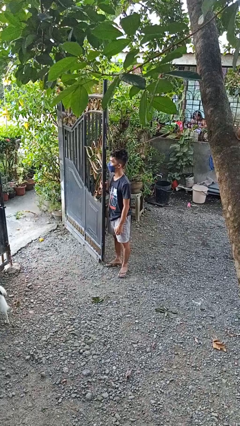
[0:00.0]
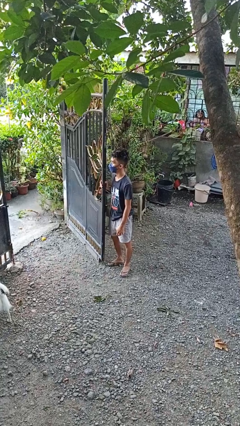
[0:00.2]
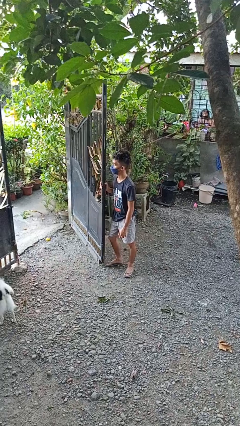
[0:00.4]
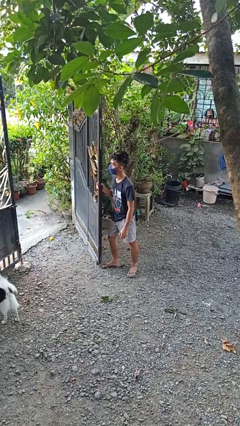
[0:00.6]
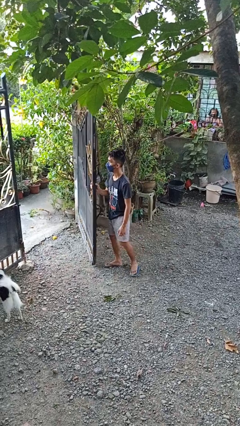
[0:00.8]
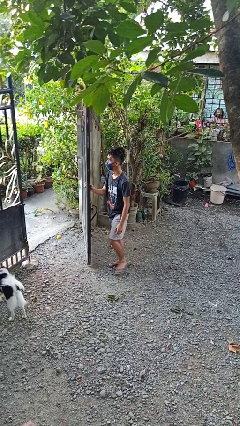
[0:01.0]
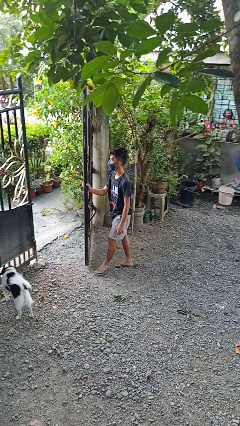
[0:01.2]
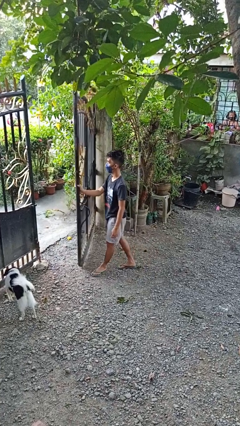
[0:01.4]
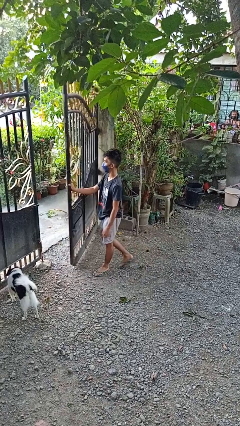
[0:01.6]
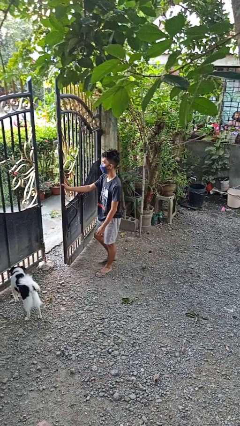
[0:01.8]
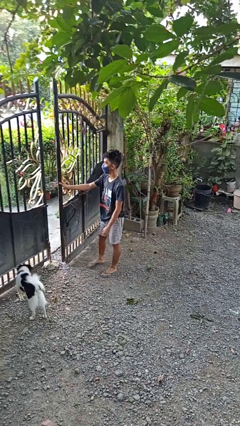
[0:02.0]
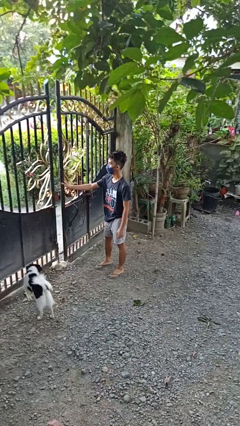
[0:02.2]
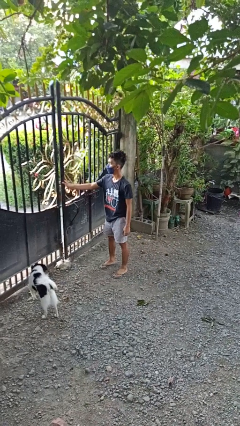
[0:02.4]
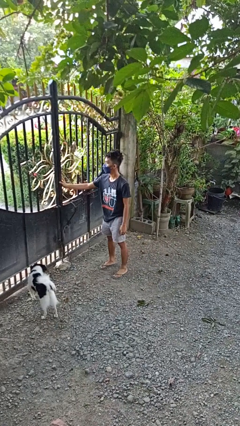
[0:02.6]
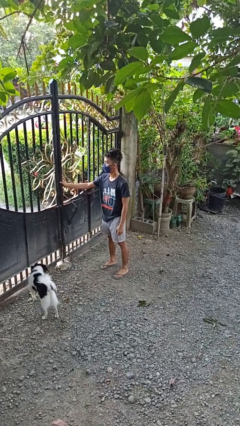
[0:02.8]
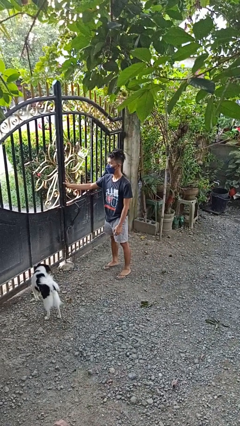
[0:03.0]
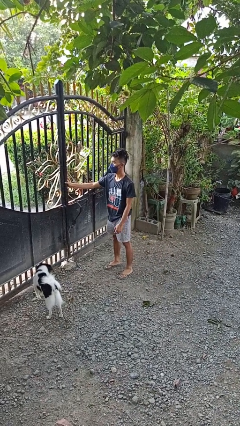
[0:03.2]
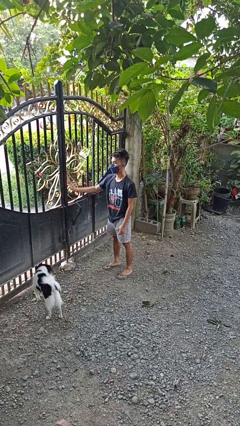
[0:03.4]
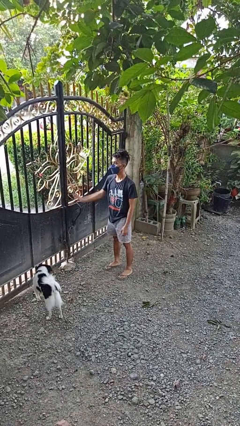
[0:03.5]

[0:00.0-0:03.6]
person closes gate

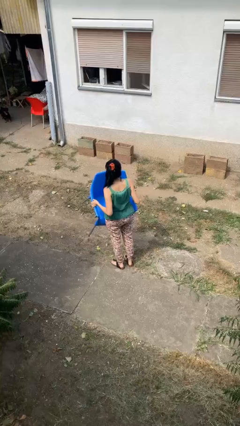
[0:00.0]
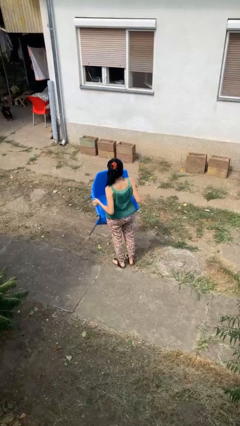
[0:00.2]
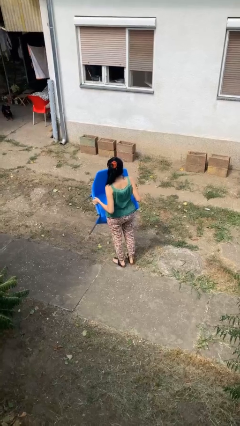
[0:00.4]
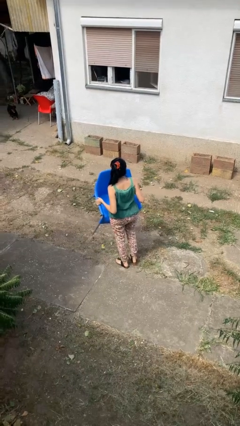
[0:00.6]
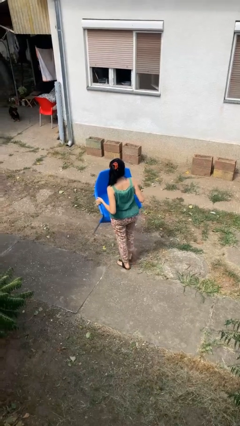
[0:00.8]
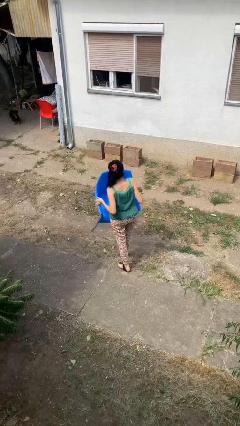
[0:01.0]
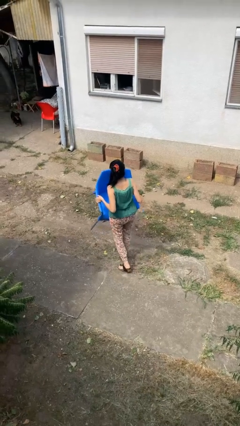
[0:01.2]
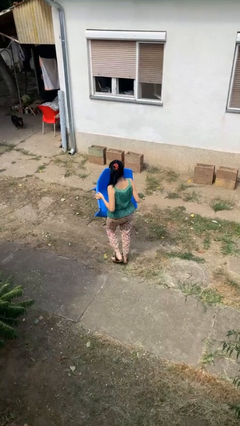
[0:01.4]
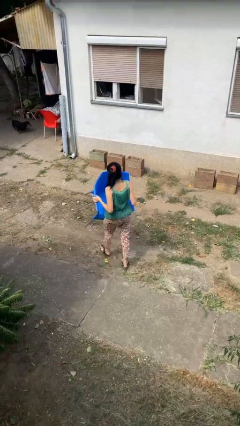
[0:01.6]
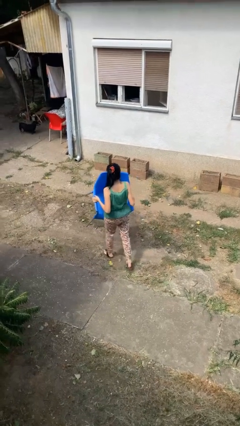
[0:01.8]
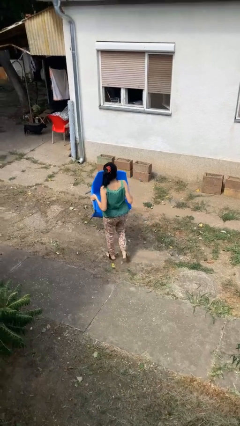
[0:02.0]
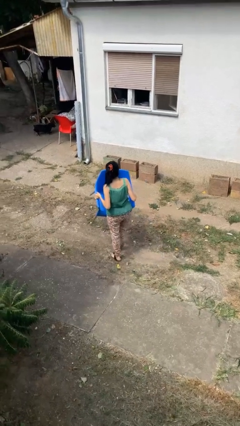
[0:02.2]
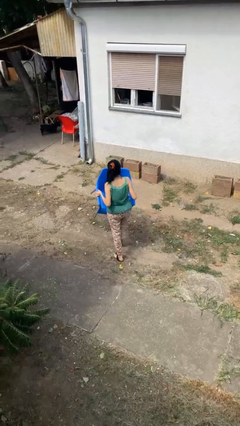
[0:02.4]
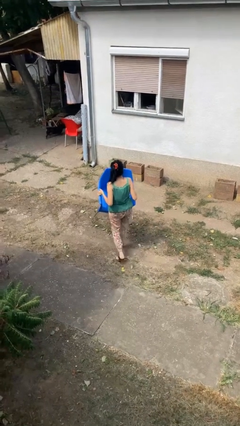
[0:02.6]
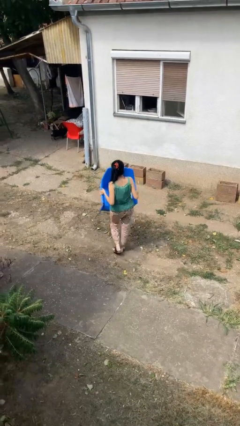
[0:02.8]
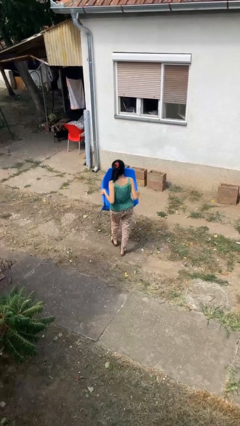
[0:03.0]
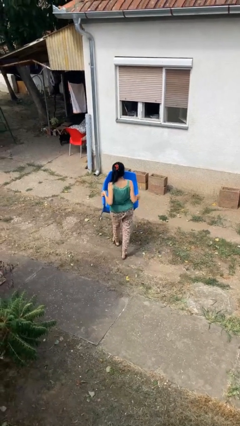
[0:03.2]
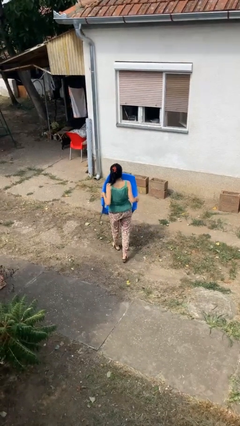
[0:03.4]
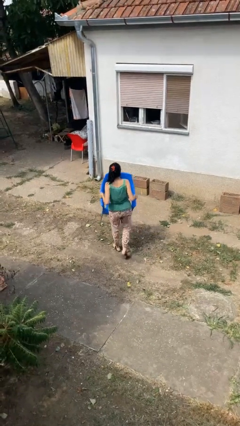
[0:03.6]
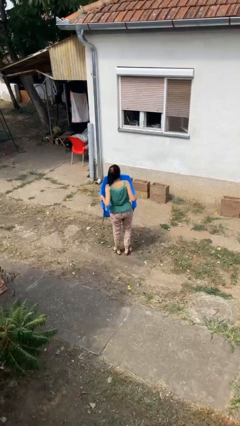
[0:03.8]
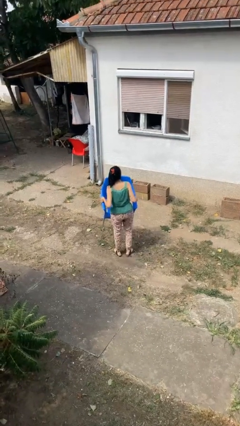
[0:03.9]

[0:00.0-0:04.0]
person carries furniture

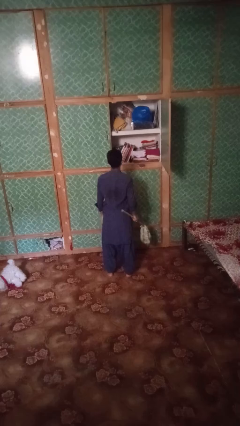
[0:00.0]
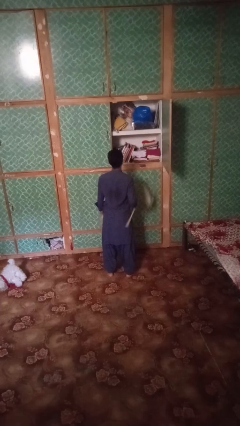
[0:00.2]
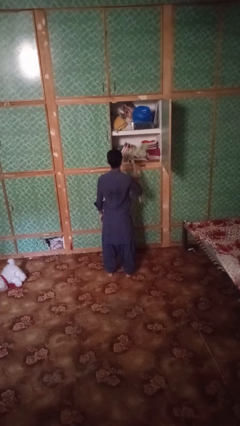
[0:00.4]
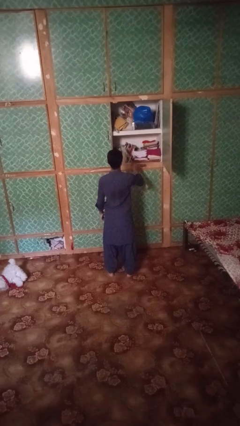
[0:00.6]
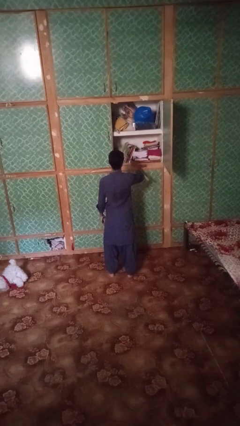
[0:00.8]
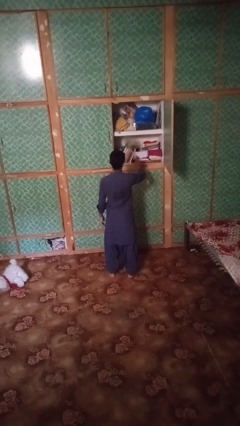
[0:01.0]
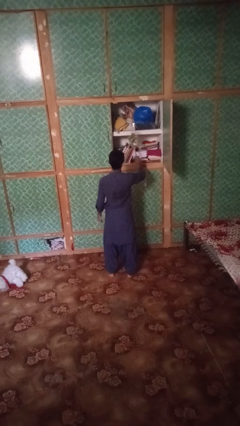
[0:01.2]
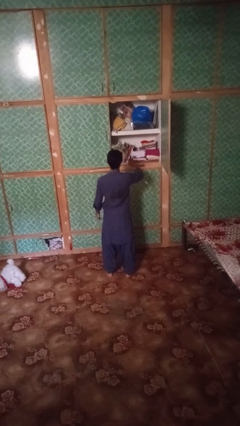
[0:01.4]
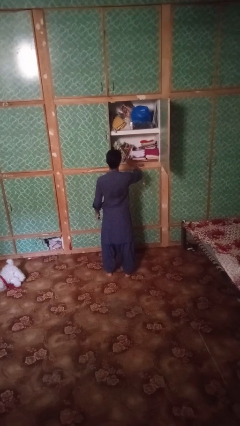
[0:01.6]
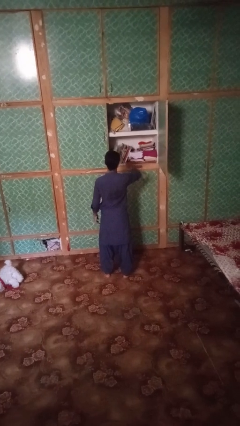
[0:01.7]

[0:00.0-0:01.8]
person dusts furniture

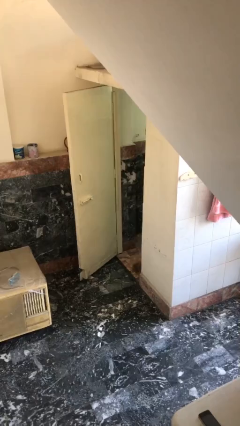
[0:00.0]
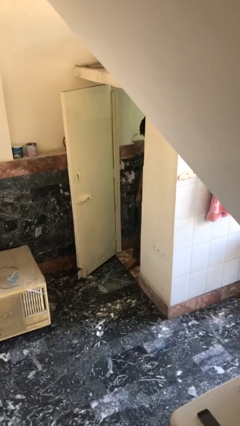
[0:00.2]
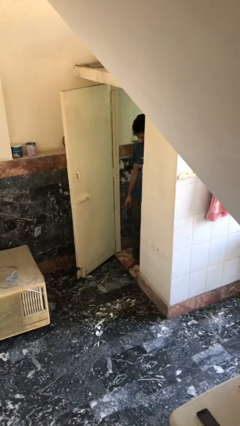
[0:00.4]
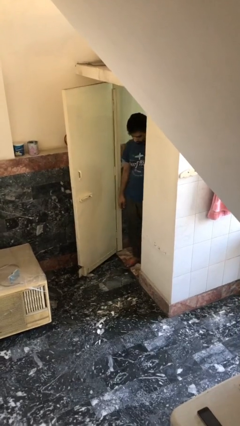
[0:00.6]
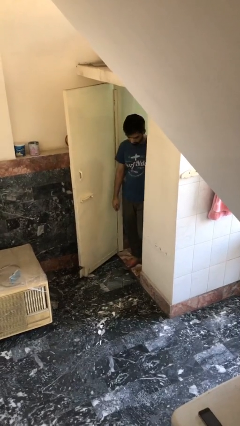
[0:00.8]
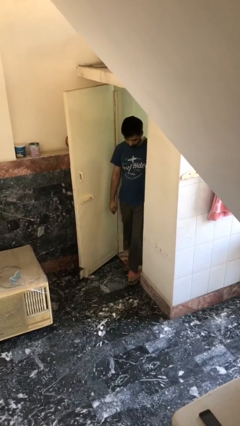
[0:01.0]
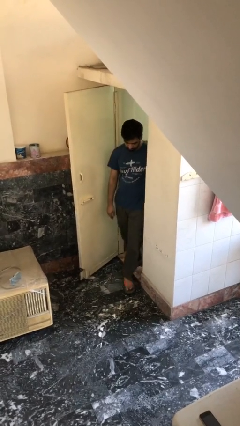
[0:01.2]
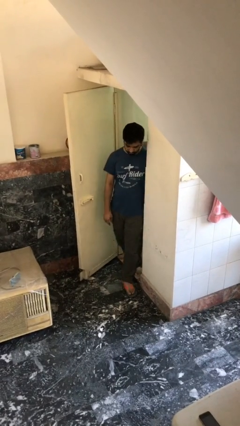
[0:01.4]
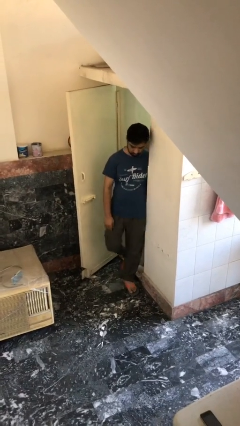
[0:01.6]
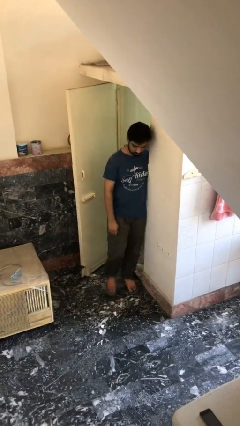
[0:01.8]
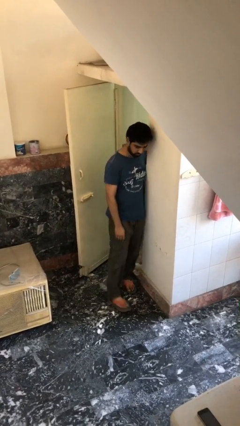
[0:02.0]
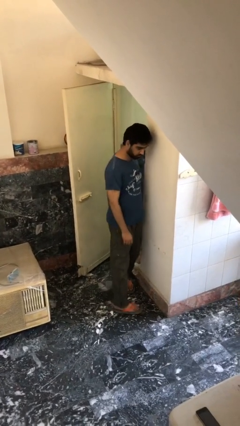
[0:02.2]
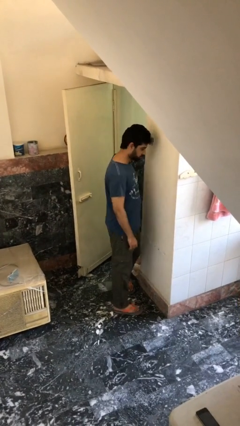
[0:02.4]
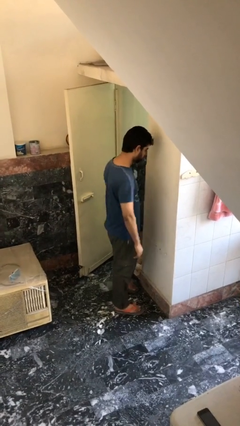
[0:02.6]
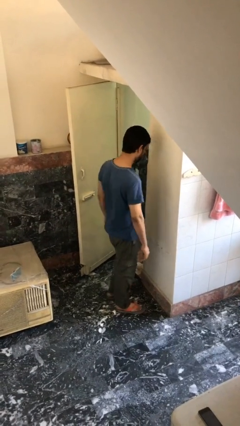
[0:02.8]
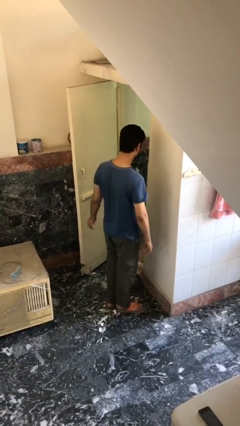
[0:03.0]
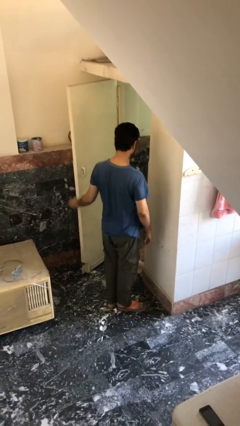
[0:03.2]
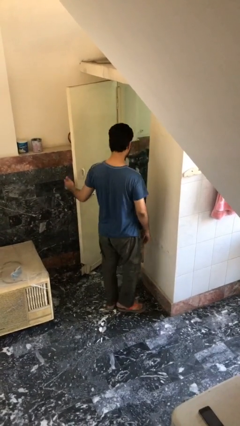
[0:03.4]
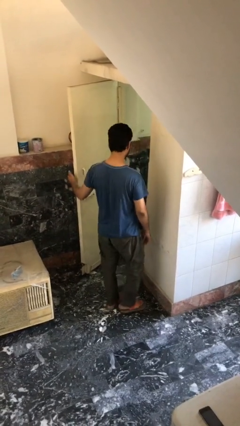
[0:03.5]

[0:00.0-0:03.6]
person enters scene through structure

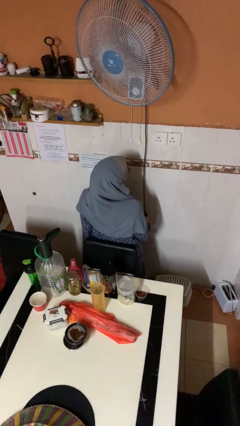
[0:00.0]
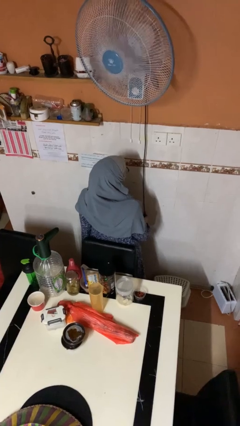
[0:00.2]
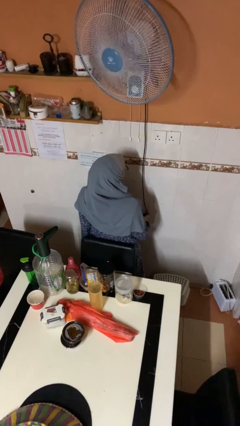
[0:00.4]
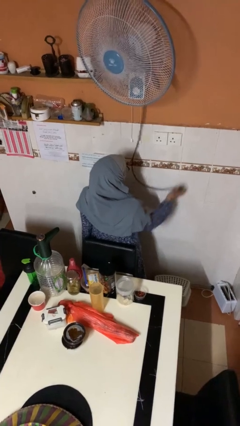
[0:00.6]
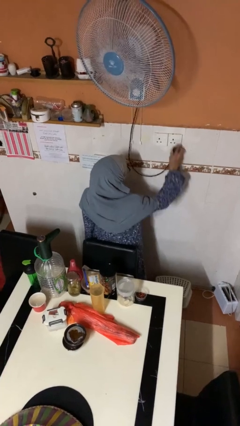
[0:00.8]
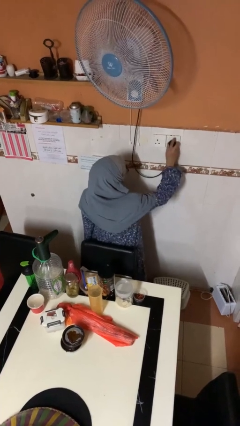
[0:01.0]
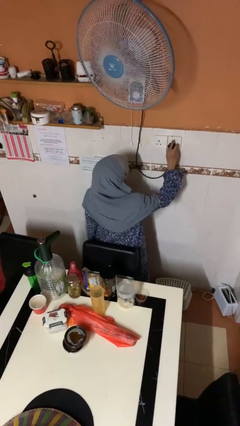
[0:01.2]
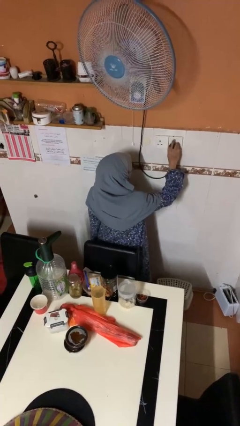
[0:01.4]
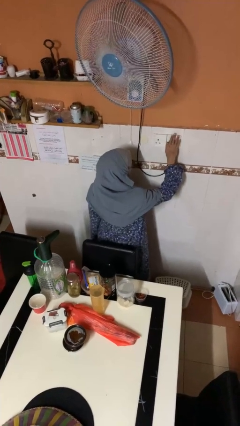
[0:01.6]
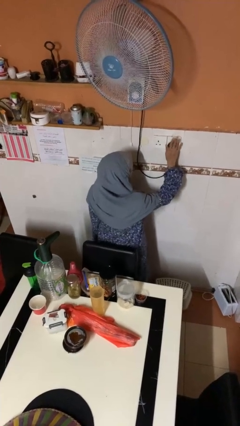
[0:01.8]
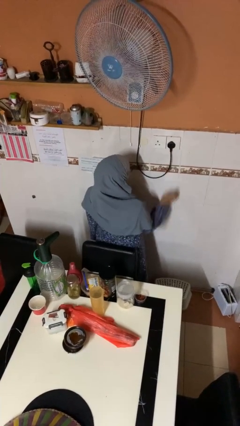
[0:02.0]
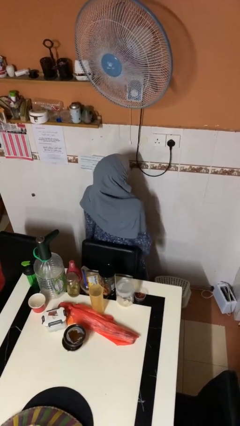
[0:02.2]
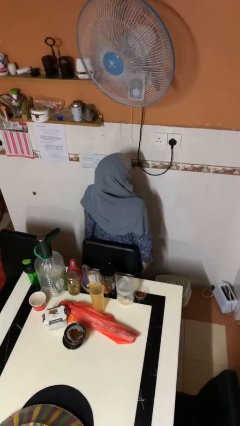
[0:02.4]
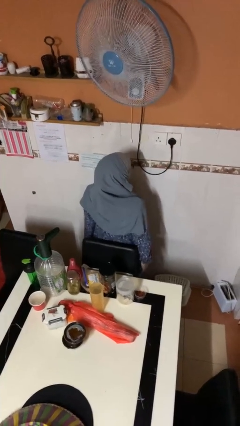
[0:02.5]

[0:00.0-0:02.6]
person plugs into electrical socket

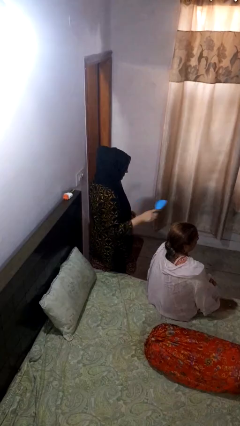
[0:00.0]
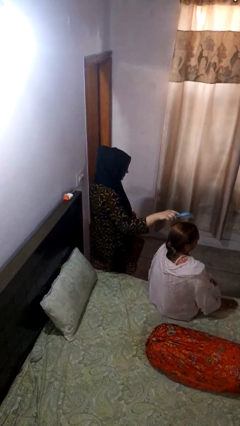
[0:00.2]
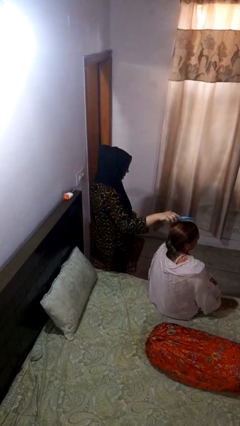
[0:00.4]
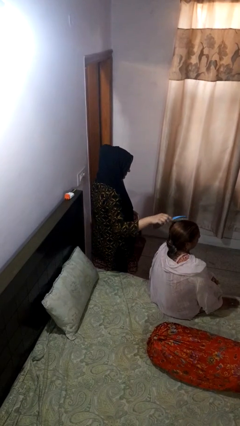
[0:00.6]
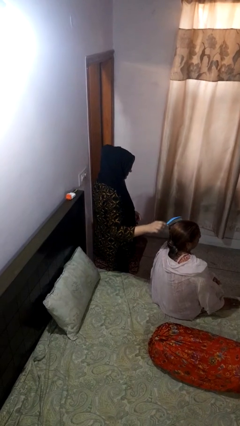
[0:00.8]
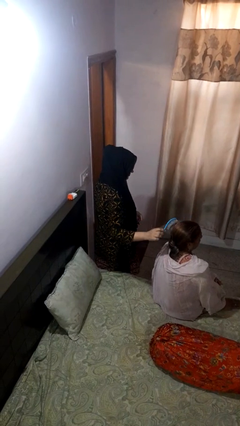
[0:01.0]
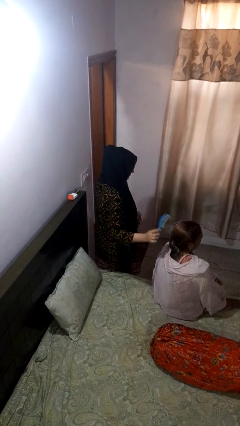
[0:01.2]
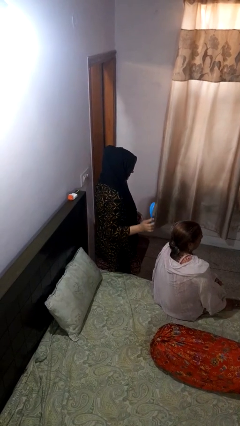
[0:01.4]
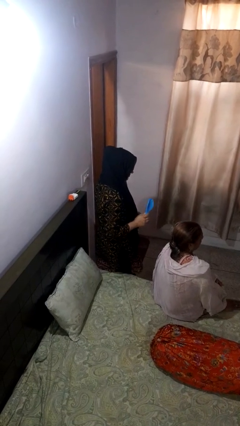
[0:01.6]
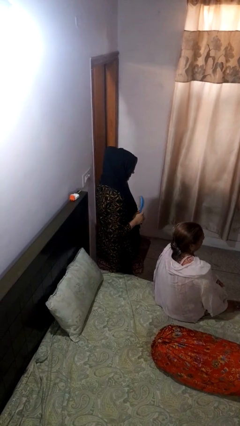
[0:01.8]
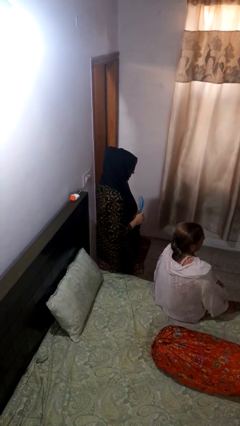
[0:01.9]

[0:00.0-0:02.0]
person brushes hair of person
